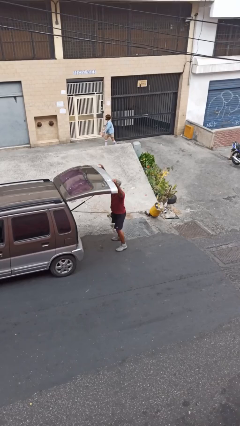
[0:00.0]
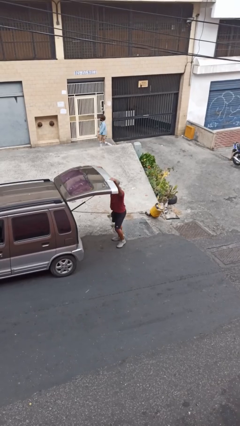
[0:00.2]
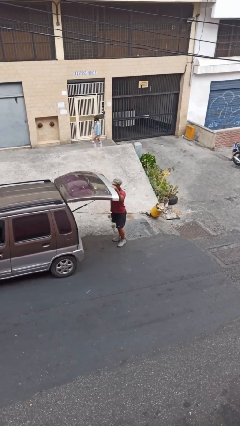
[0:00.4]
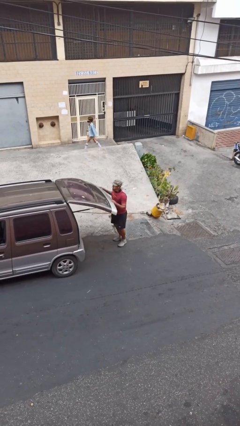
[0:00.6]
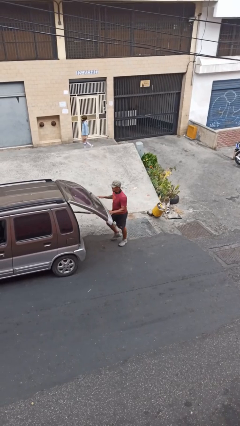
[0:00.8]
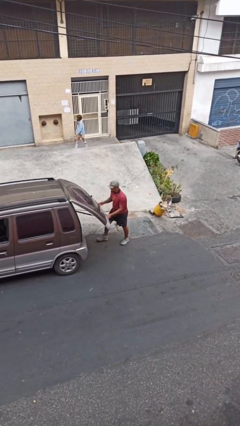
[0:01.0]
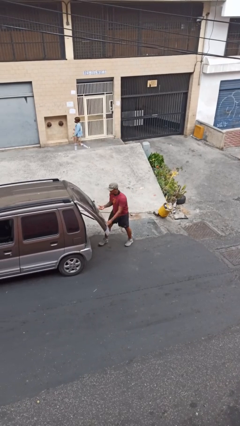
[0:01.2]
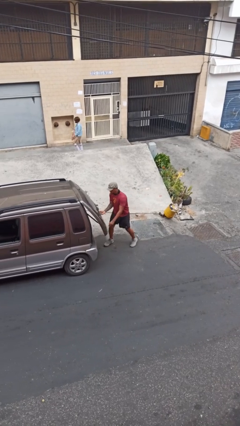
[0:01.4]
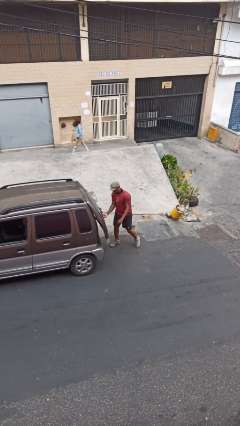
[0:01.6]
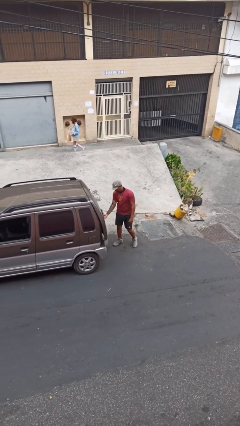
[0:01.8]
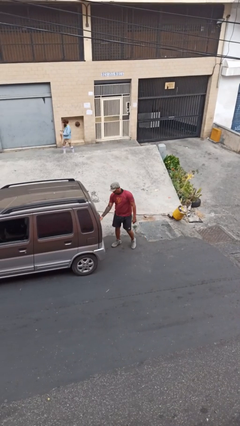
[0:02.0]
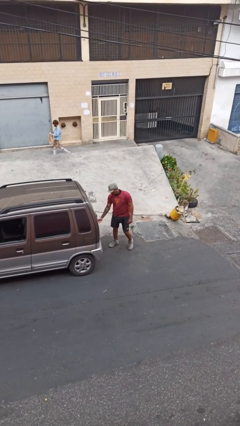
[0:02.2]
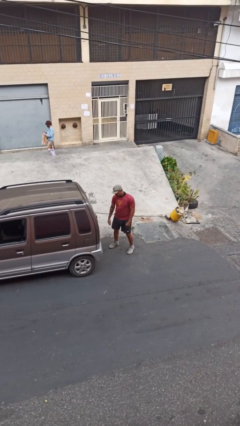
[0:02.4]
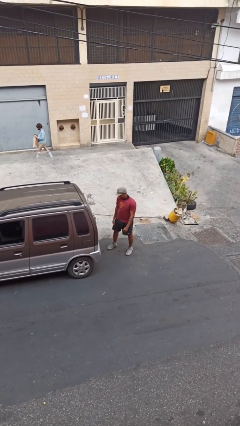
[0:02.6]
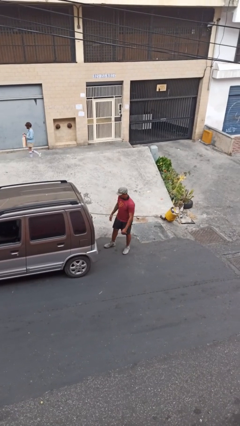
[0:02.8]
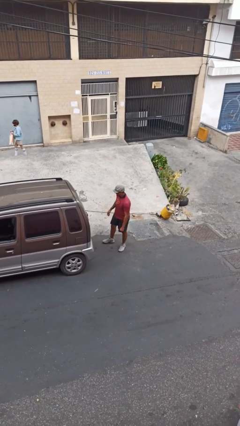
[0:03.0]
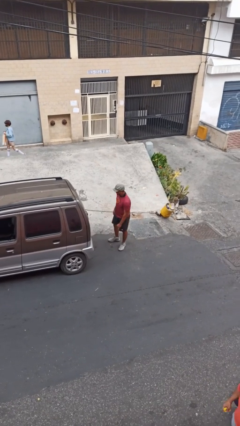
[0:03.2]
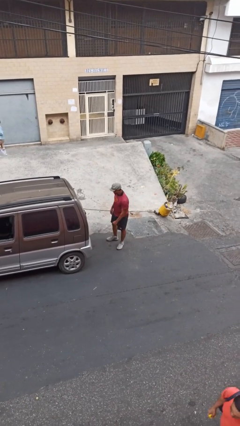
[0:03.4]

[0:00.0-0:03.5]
person closes car trunk

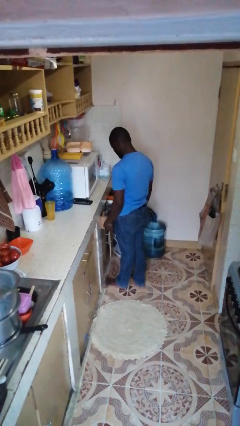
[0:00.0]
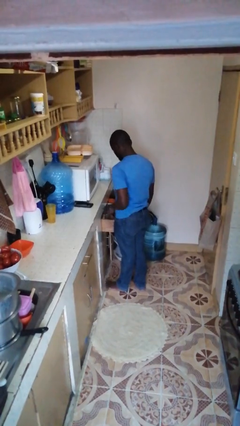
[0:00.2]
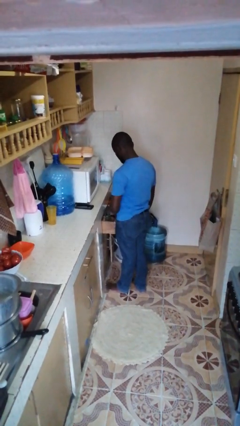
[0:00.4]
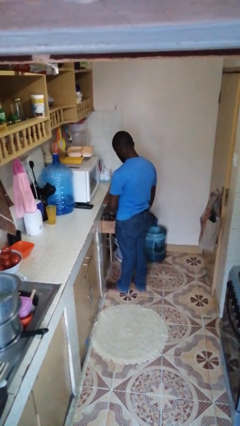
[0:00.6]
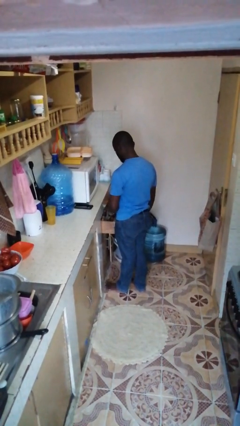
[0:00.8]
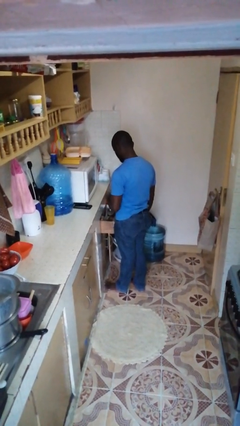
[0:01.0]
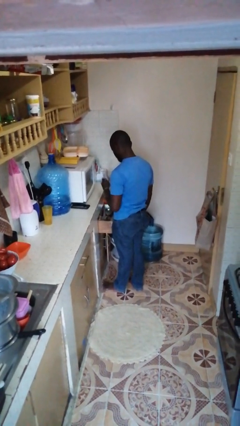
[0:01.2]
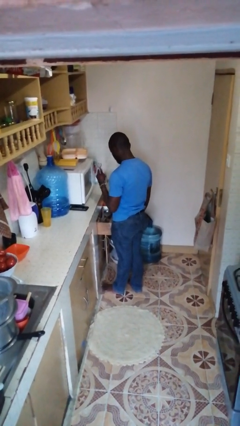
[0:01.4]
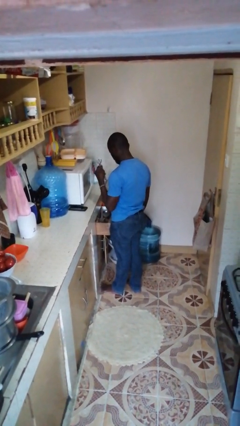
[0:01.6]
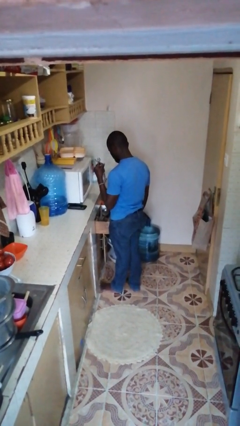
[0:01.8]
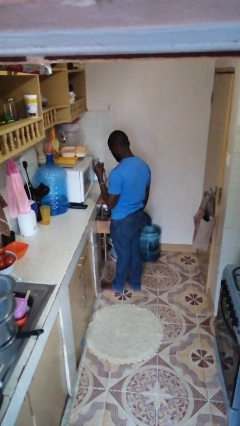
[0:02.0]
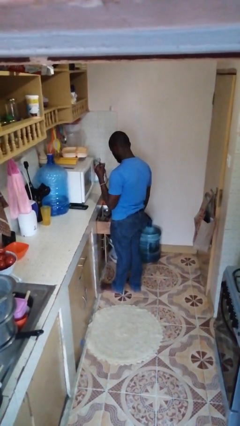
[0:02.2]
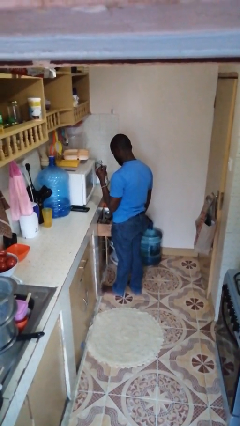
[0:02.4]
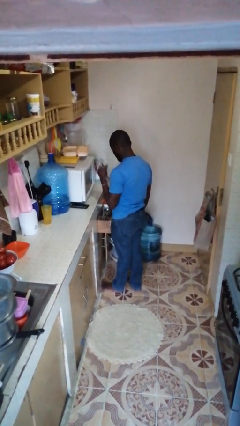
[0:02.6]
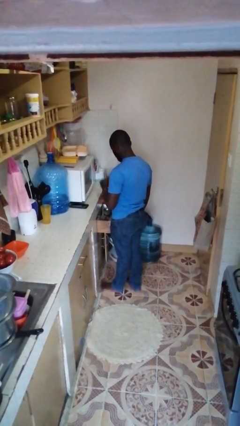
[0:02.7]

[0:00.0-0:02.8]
person takes object from kitchen drawer

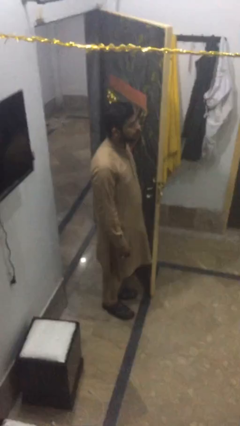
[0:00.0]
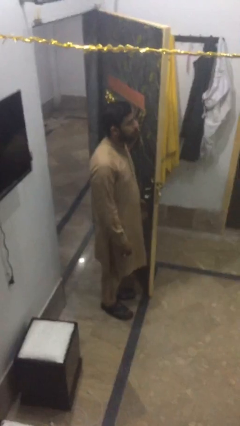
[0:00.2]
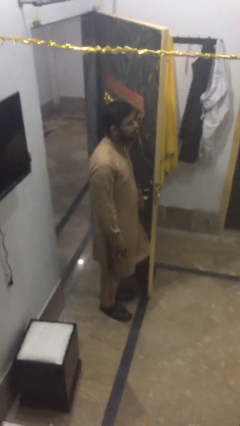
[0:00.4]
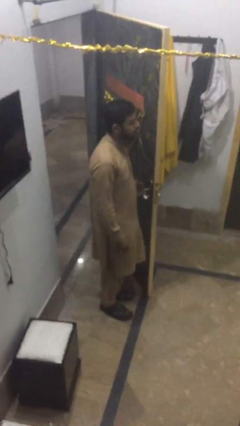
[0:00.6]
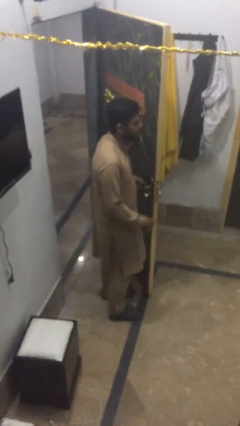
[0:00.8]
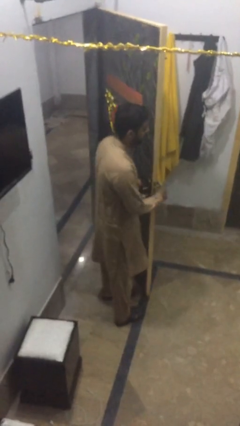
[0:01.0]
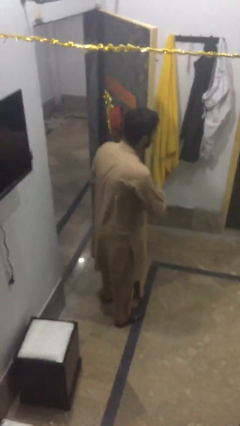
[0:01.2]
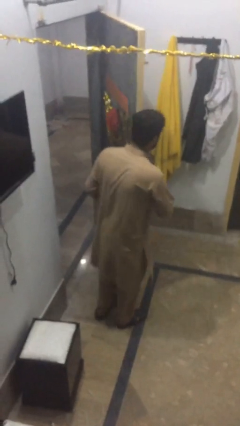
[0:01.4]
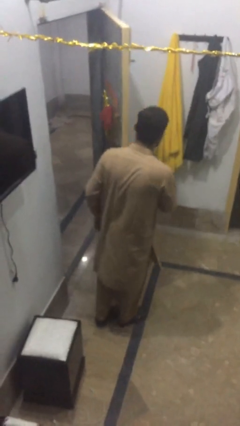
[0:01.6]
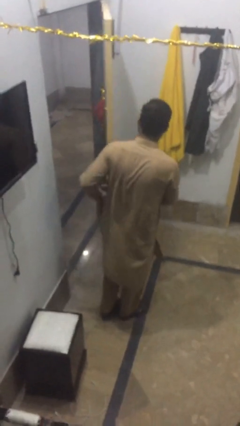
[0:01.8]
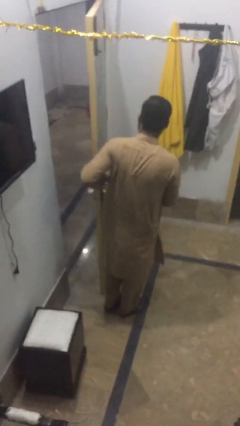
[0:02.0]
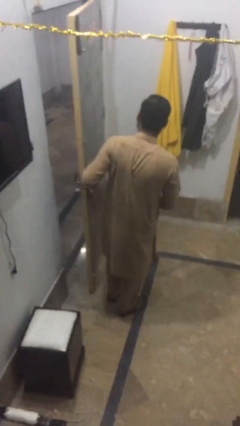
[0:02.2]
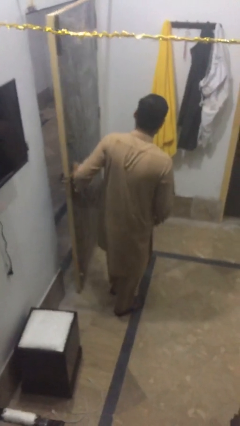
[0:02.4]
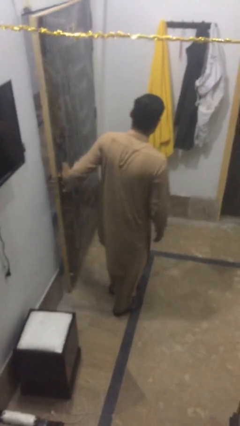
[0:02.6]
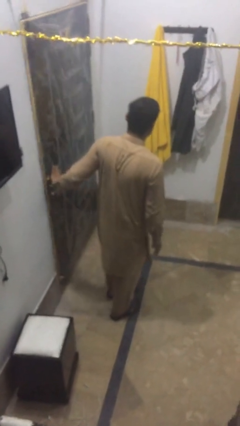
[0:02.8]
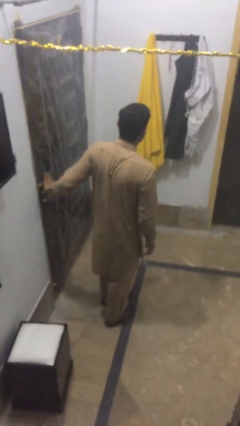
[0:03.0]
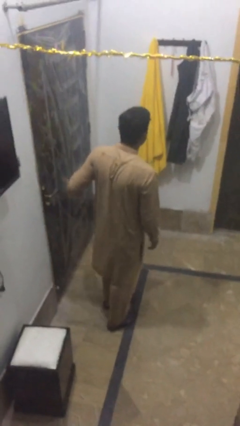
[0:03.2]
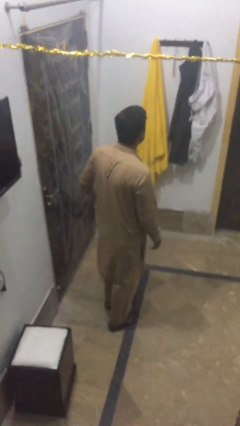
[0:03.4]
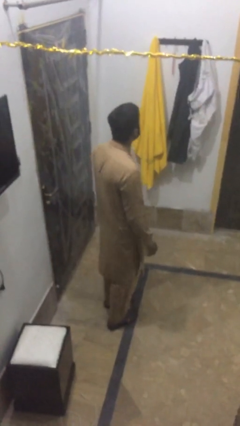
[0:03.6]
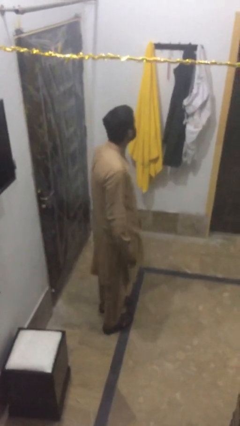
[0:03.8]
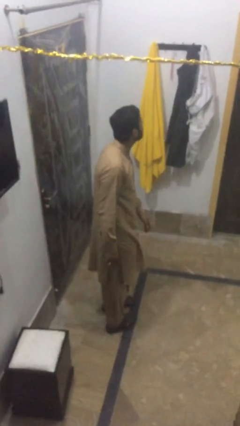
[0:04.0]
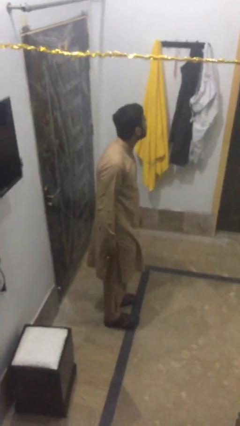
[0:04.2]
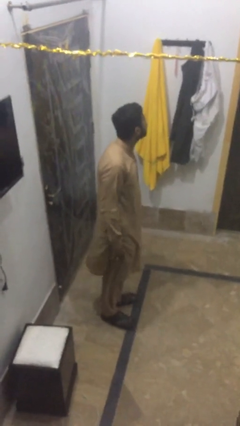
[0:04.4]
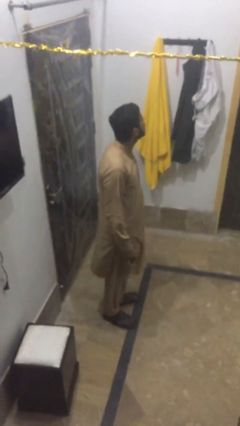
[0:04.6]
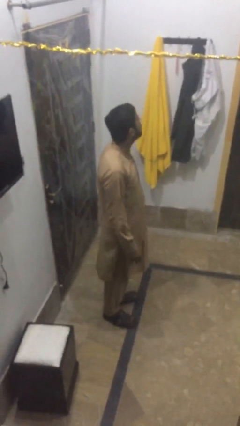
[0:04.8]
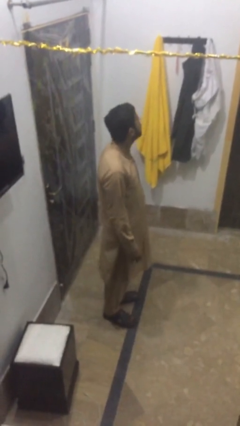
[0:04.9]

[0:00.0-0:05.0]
person closes facility door

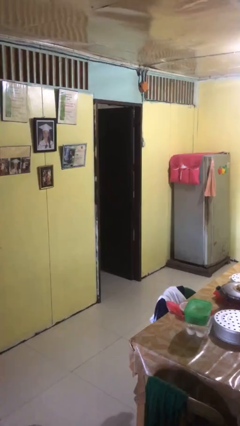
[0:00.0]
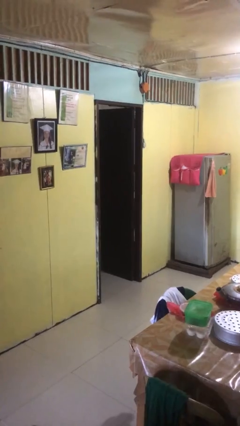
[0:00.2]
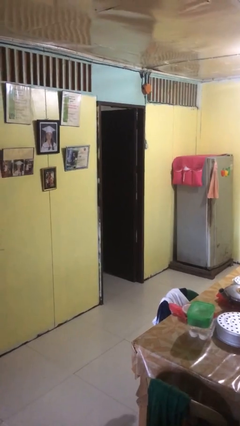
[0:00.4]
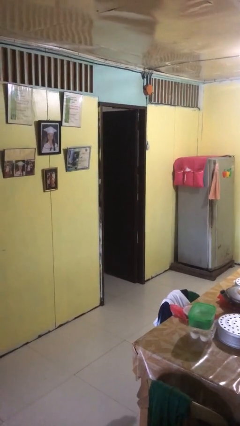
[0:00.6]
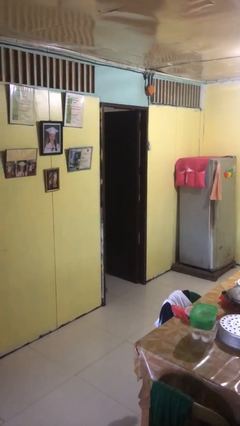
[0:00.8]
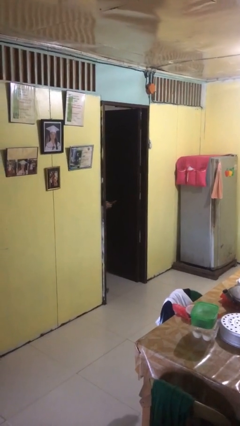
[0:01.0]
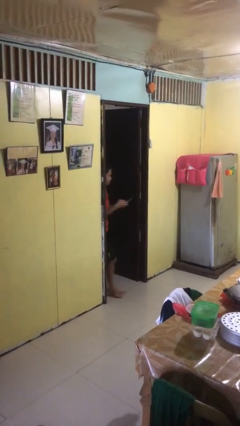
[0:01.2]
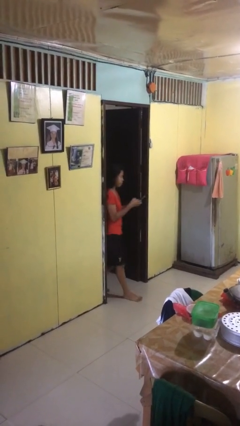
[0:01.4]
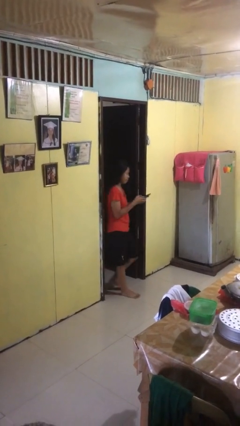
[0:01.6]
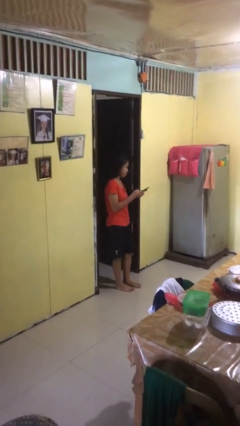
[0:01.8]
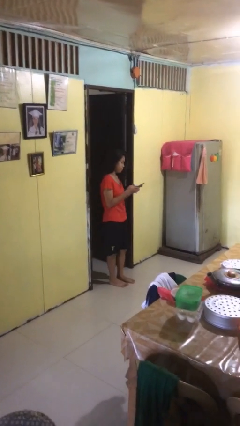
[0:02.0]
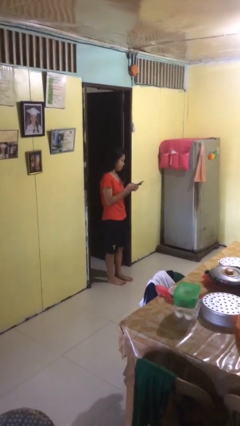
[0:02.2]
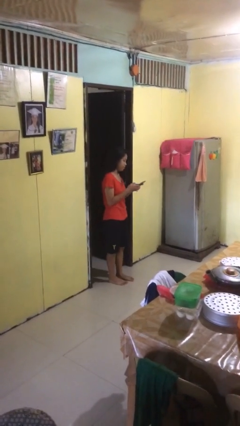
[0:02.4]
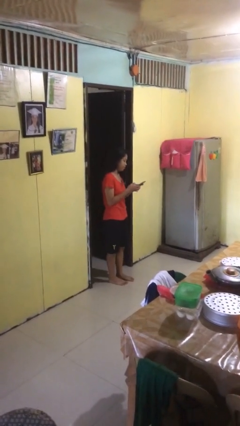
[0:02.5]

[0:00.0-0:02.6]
person enters scene through structure

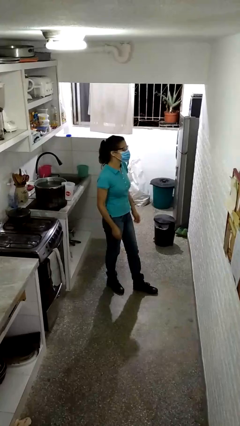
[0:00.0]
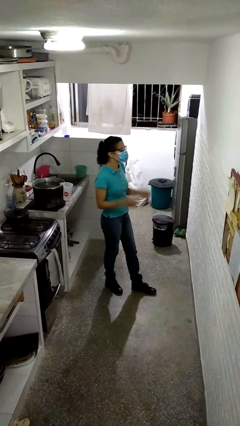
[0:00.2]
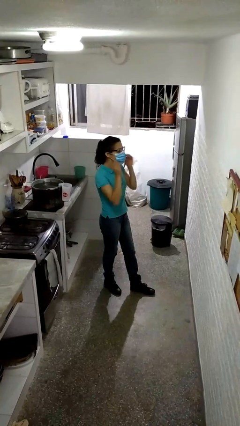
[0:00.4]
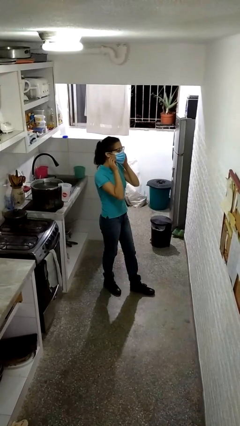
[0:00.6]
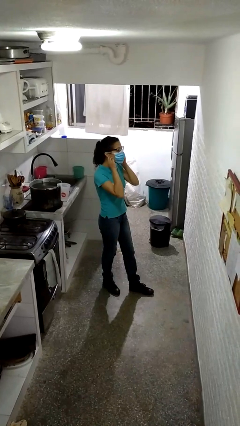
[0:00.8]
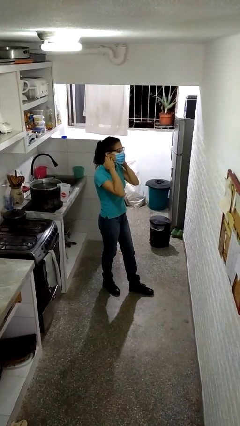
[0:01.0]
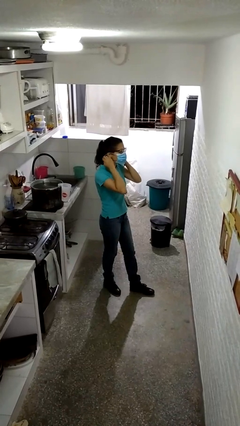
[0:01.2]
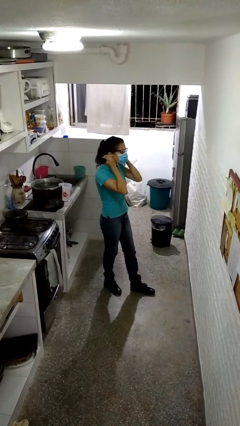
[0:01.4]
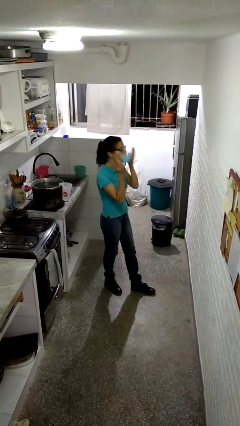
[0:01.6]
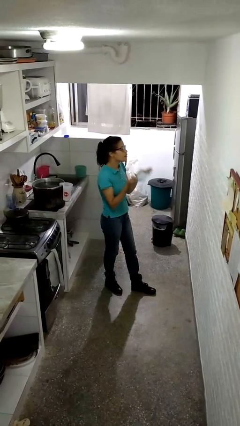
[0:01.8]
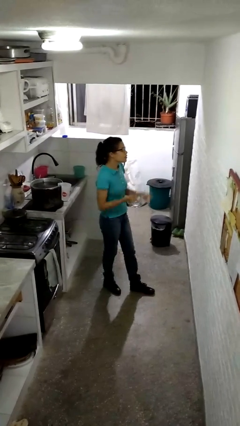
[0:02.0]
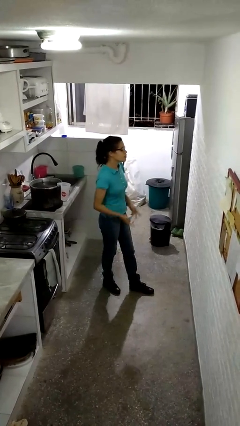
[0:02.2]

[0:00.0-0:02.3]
person takes off facemask

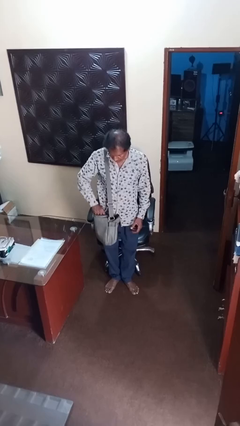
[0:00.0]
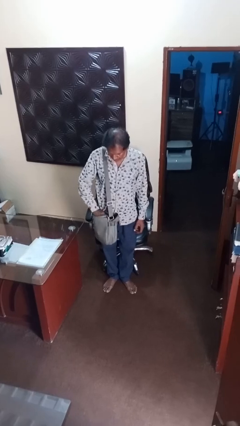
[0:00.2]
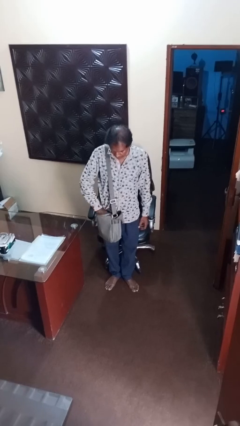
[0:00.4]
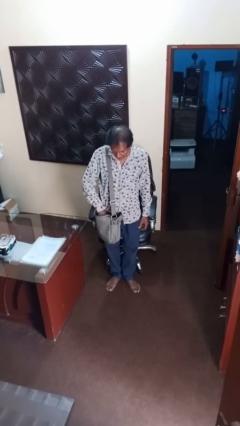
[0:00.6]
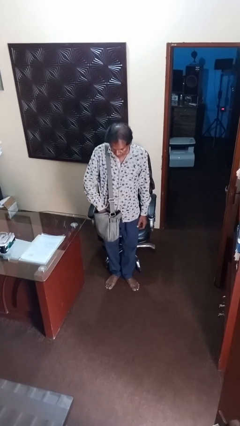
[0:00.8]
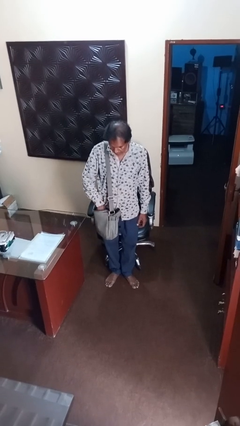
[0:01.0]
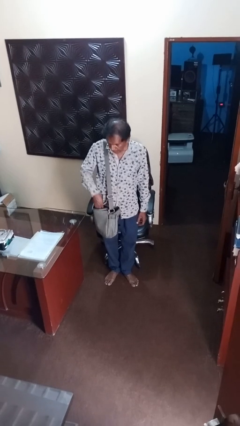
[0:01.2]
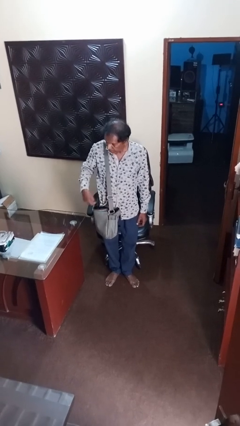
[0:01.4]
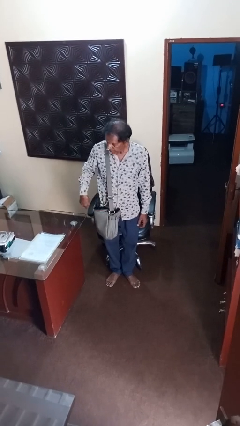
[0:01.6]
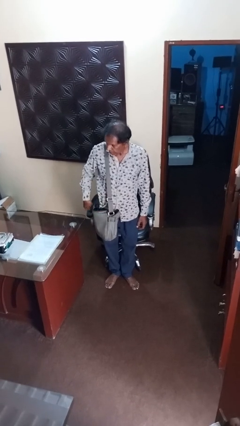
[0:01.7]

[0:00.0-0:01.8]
person puts object into backpack
